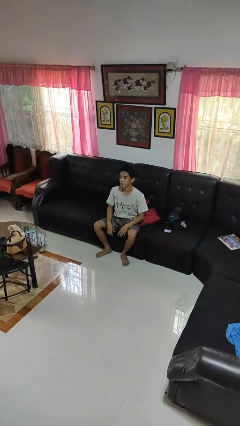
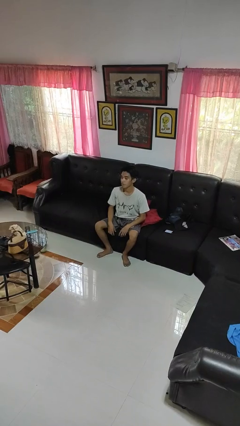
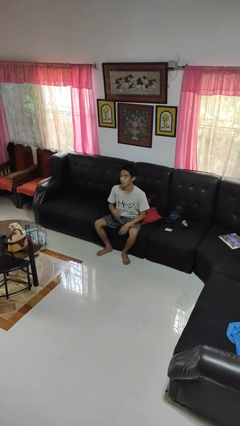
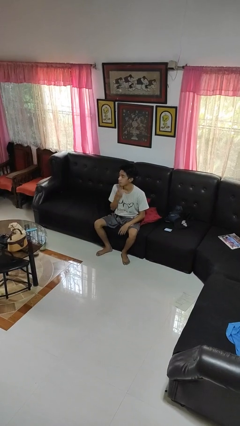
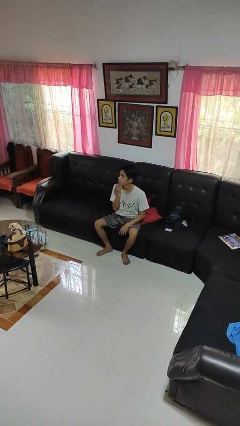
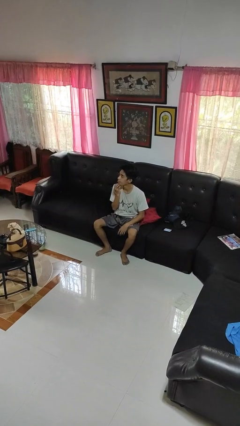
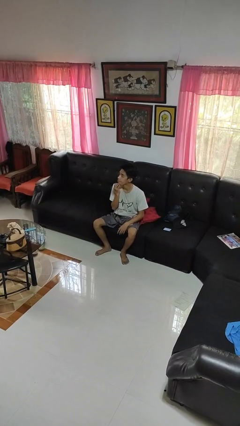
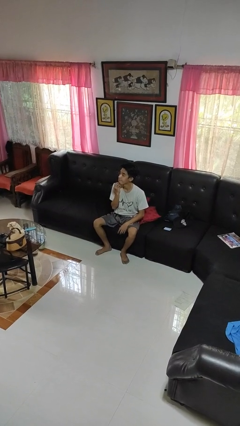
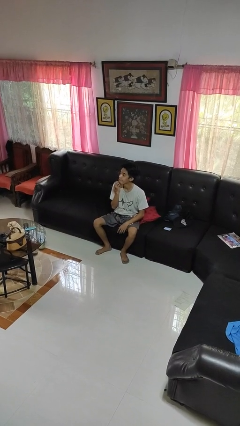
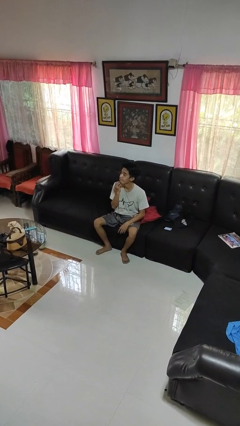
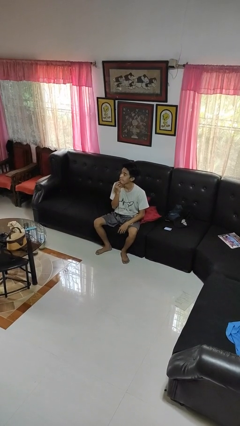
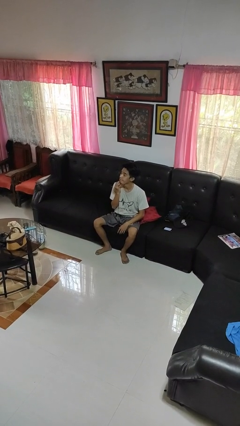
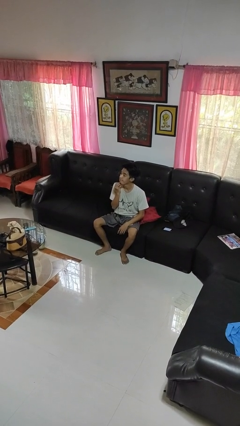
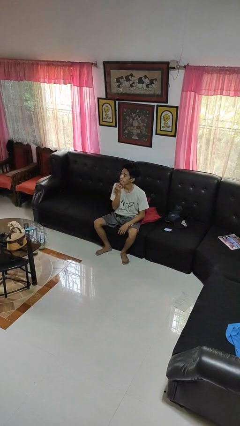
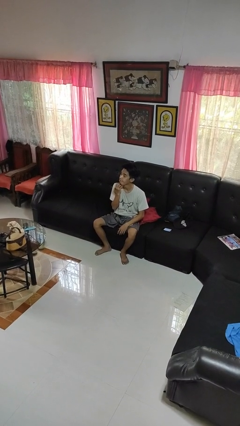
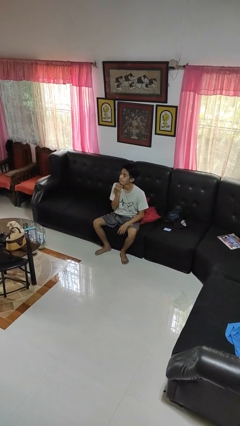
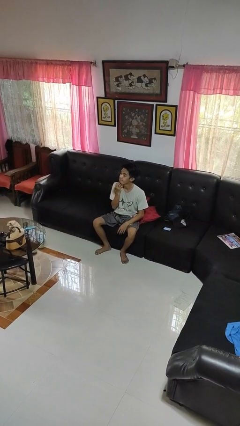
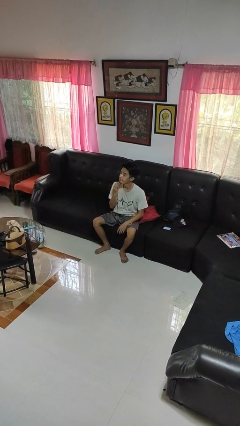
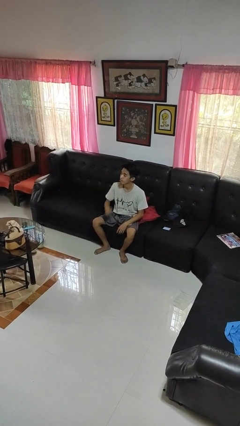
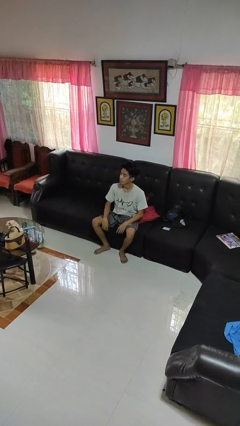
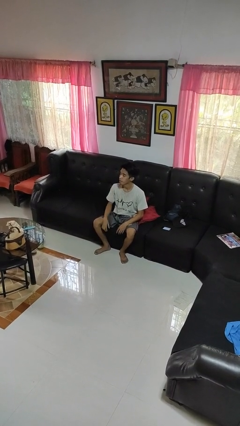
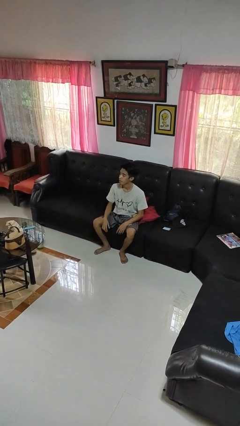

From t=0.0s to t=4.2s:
person scratches face

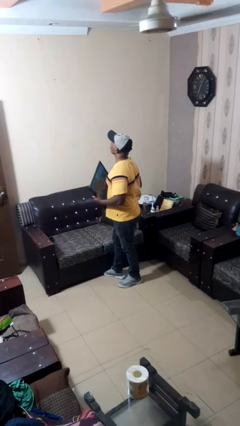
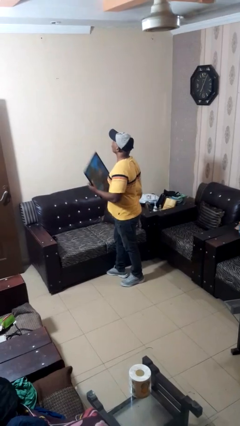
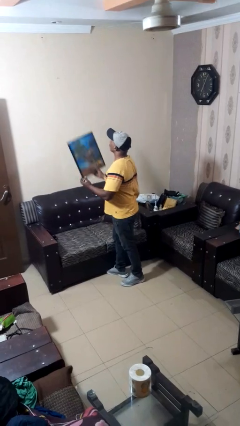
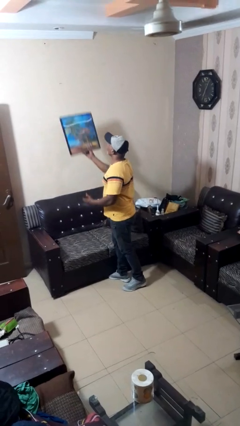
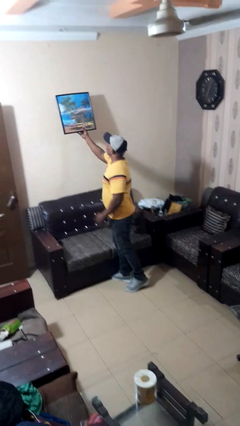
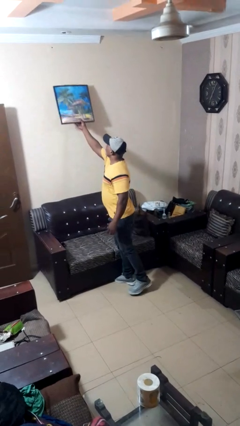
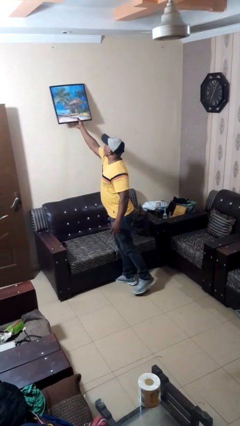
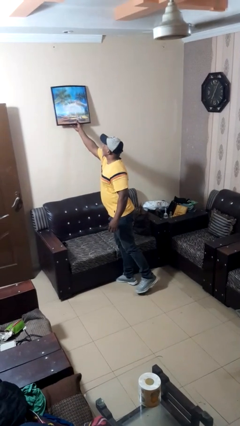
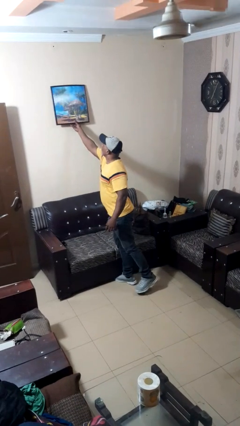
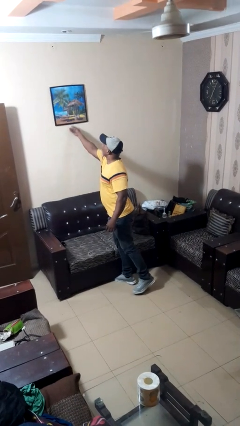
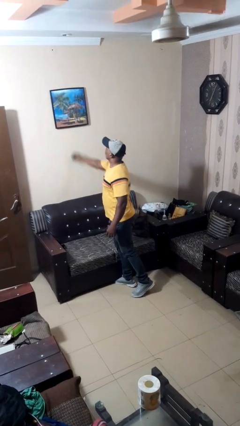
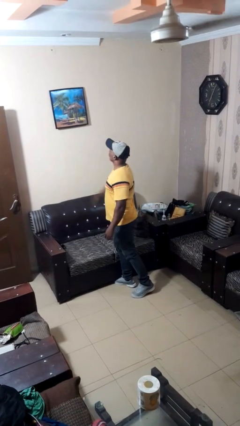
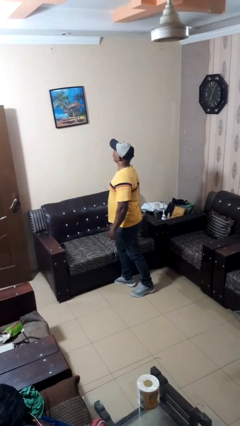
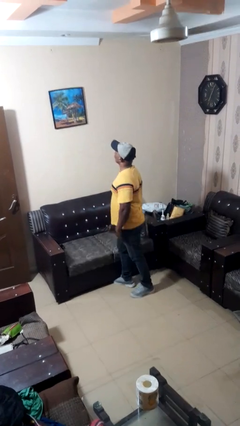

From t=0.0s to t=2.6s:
person puts up picture frame

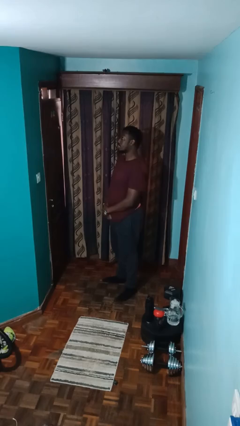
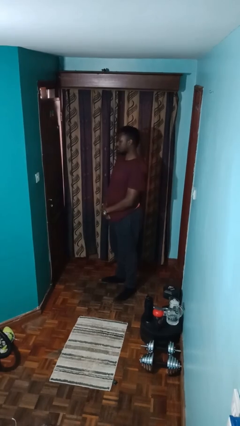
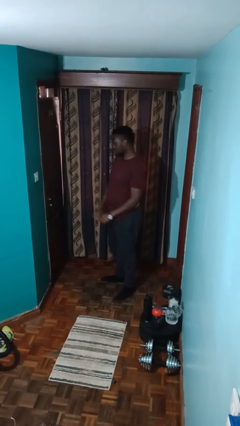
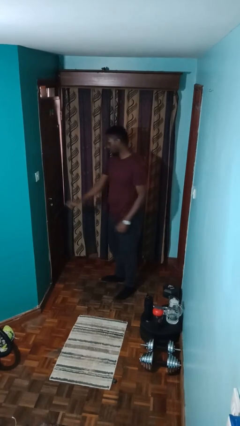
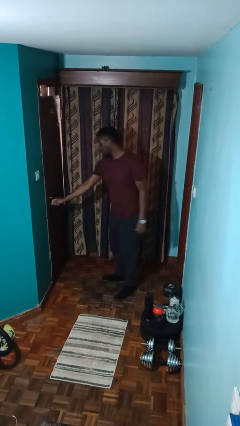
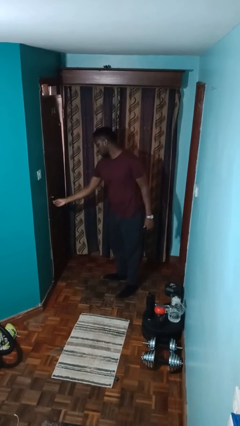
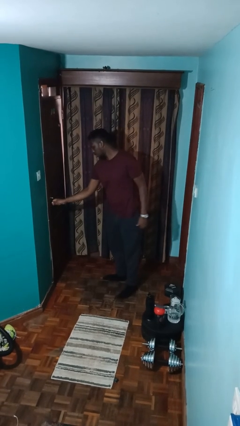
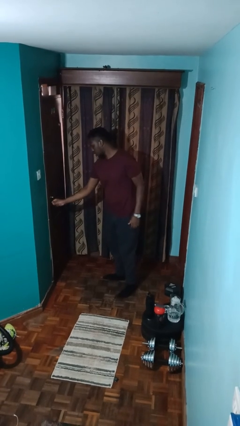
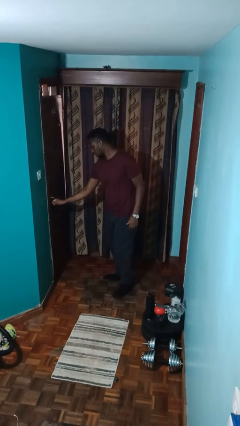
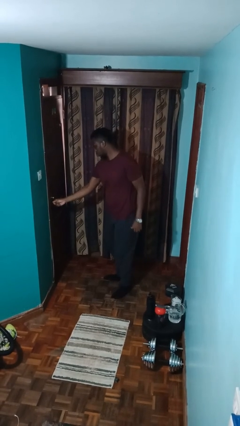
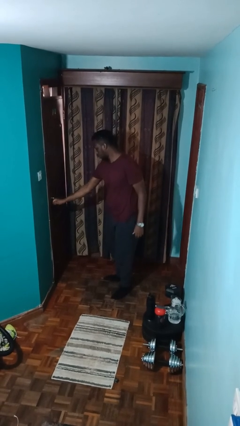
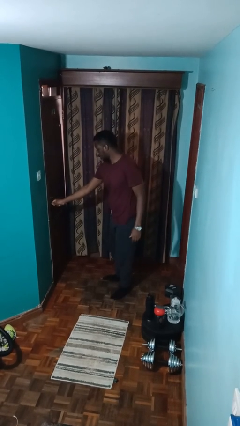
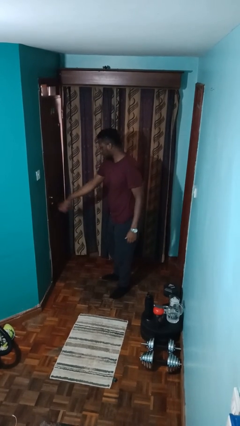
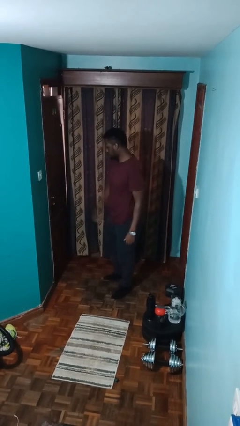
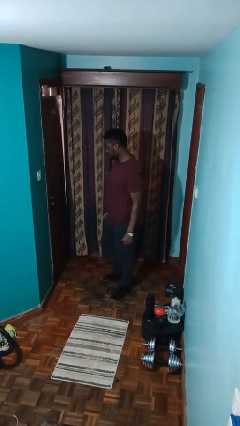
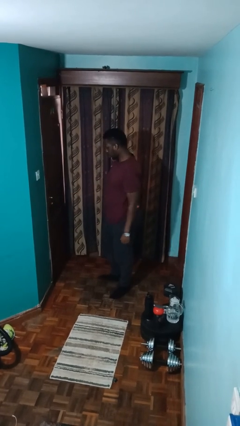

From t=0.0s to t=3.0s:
person unlocks door with keys

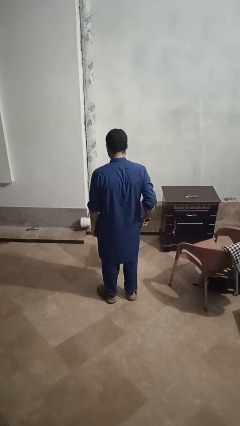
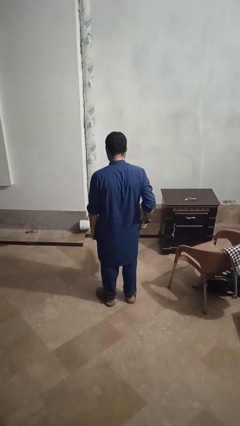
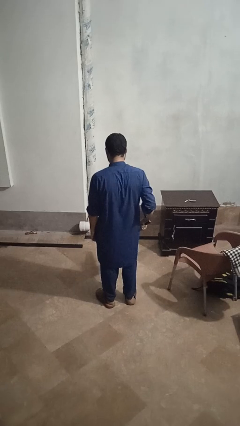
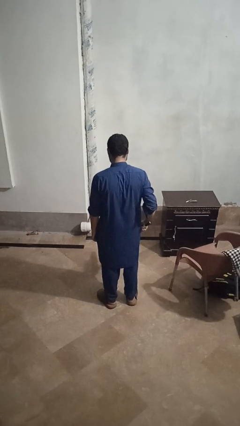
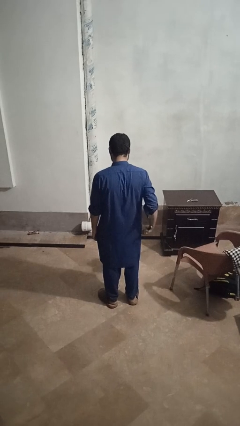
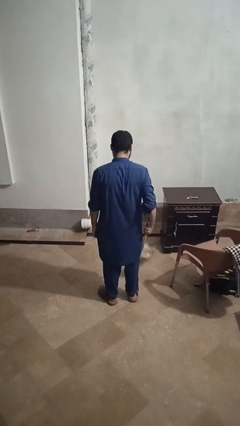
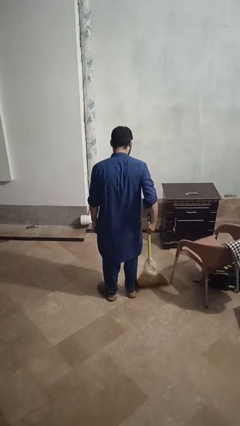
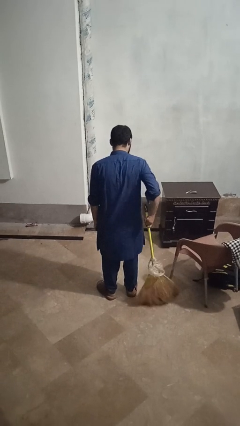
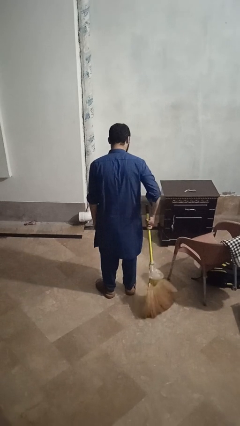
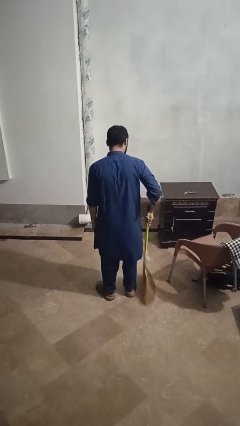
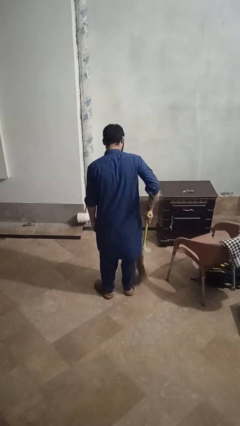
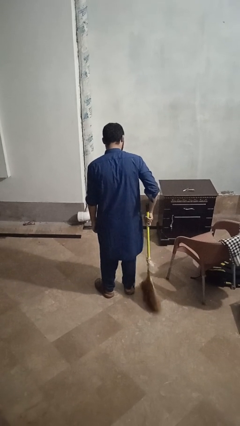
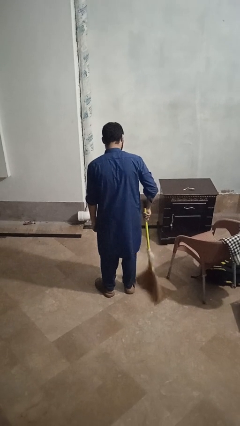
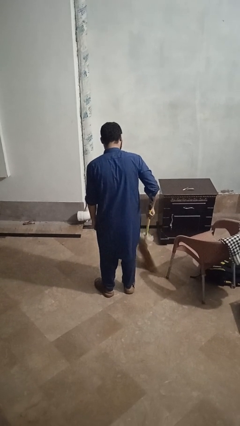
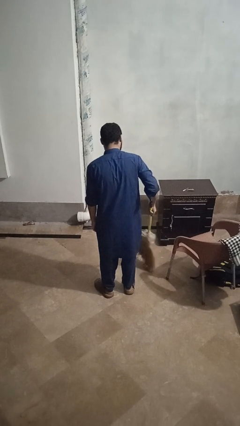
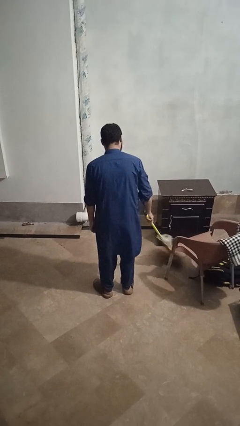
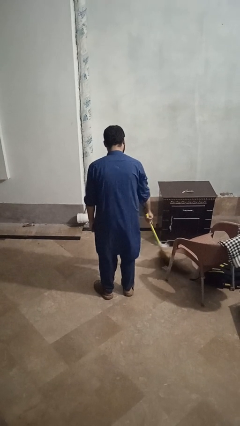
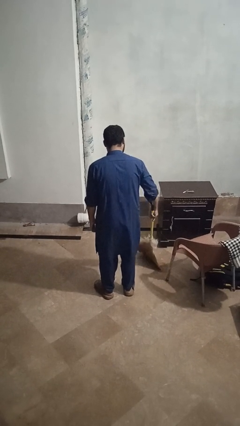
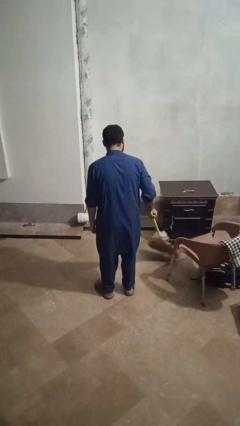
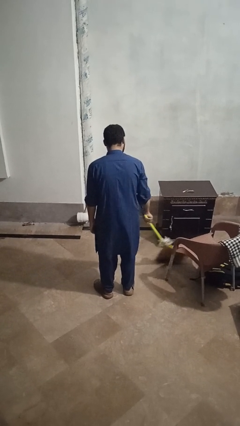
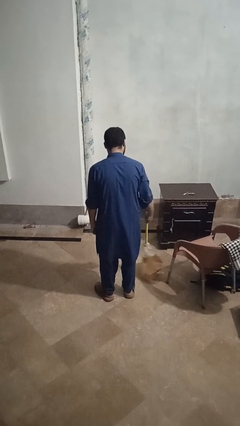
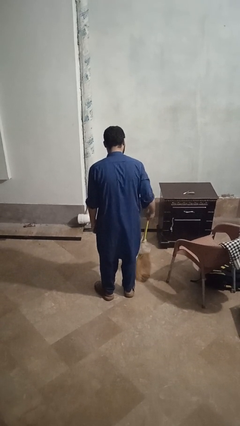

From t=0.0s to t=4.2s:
person mops

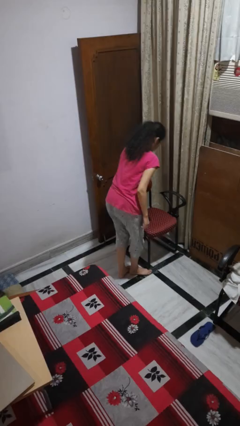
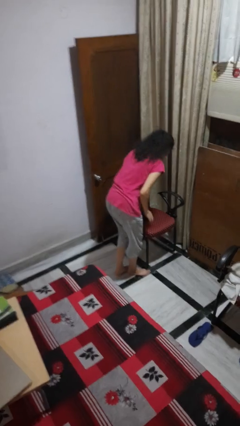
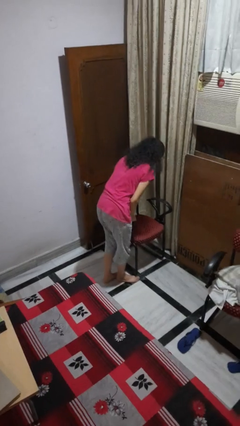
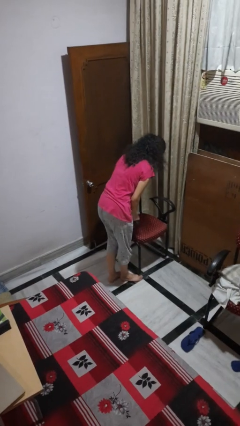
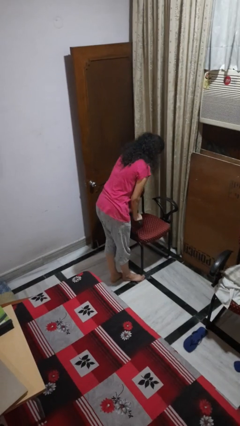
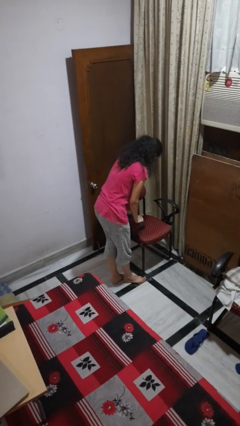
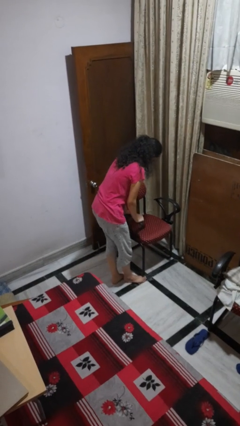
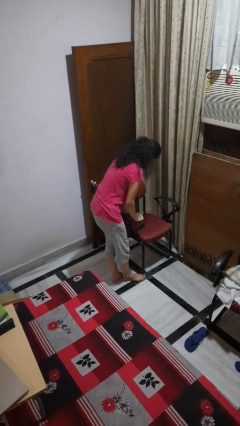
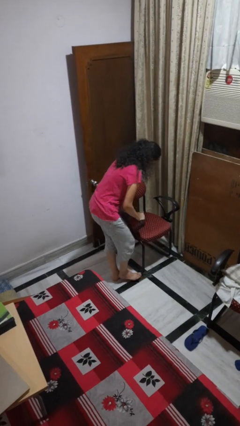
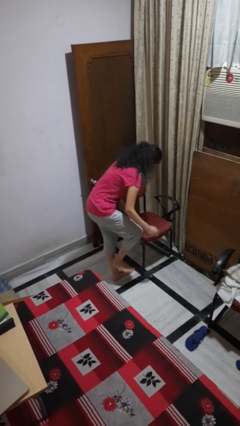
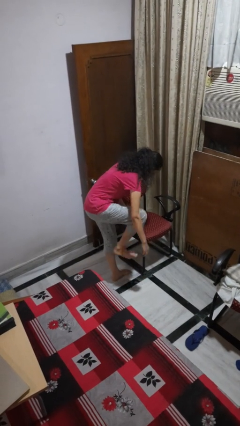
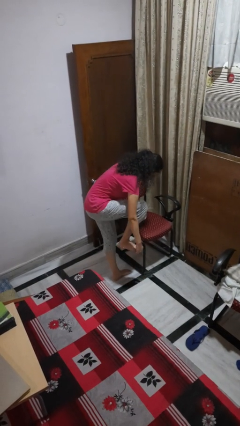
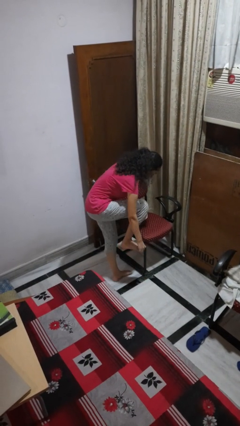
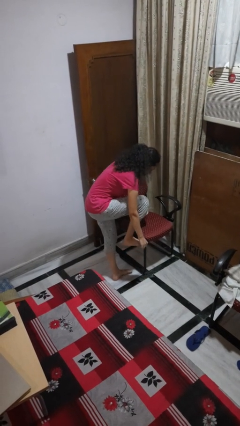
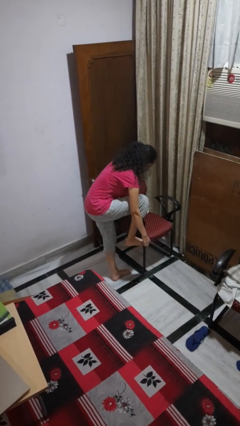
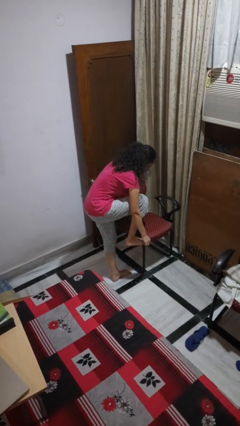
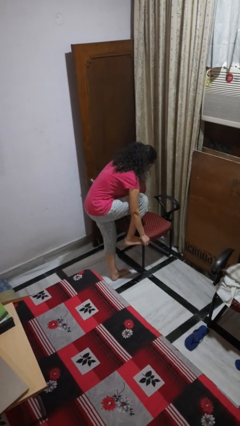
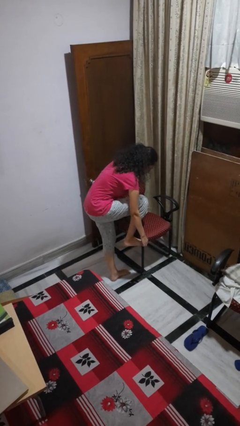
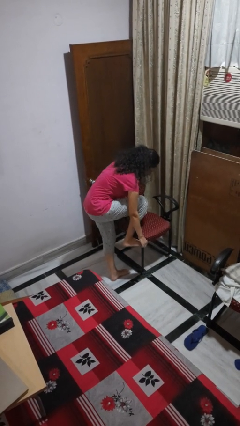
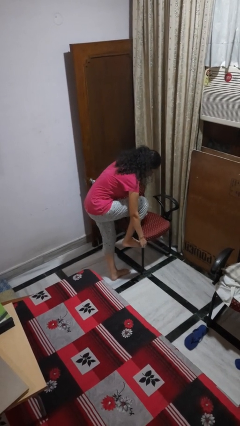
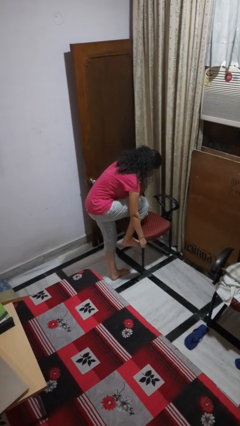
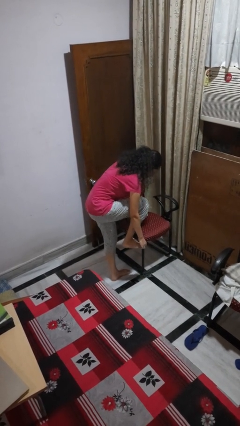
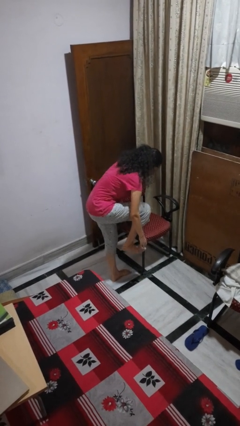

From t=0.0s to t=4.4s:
person stubs toe
